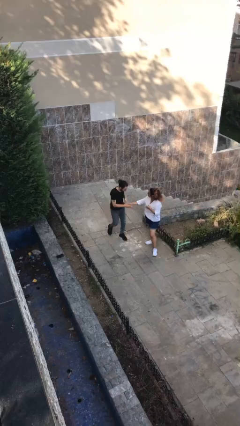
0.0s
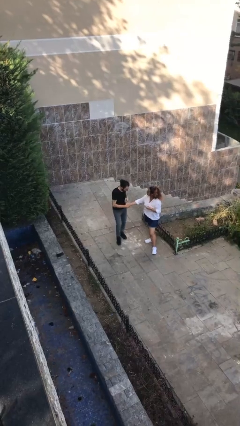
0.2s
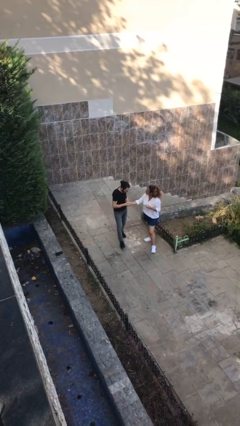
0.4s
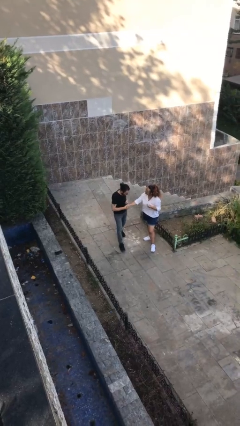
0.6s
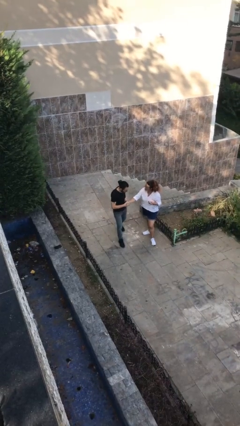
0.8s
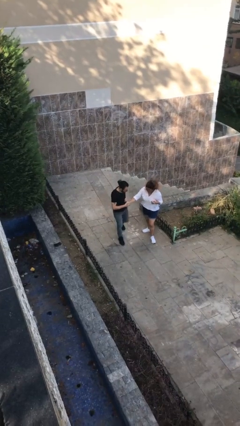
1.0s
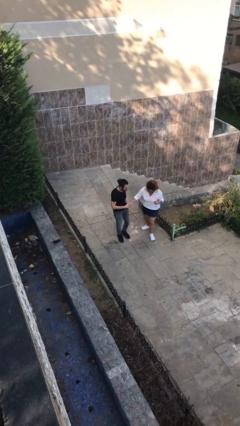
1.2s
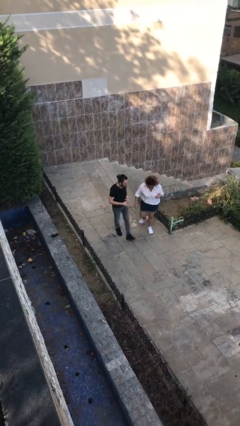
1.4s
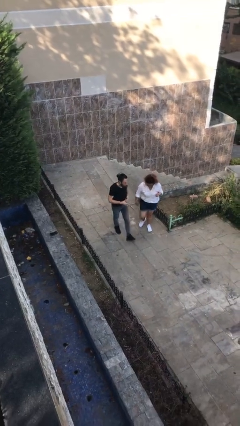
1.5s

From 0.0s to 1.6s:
person shakes hand

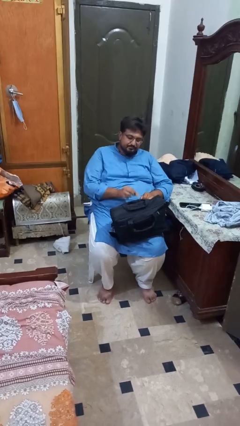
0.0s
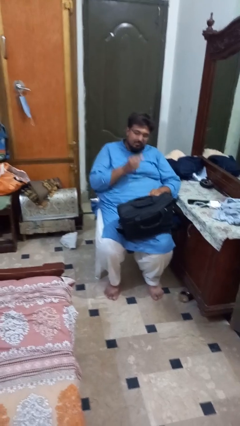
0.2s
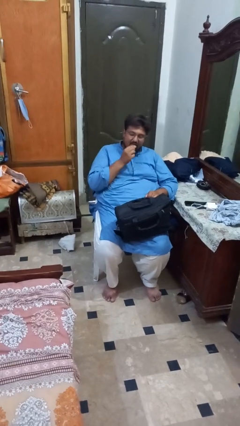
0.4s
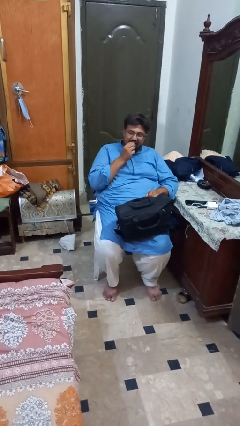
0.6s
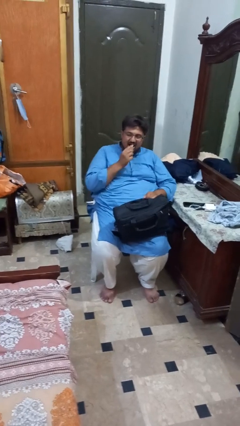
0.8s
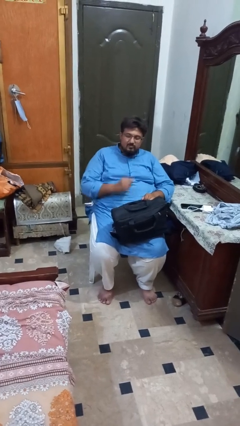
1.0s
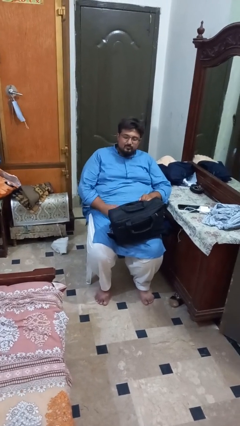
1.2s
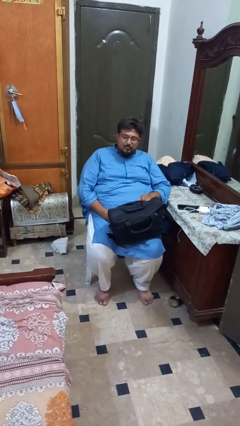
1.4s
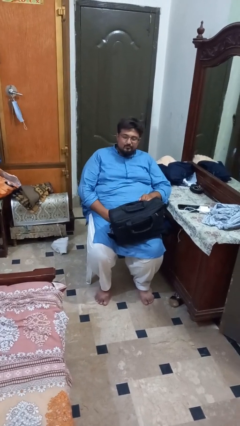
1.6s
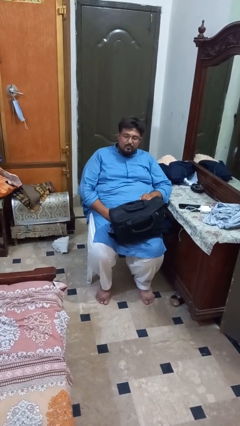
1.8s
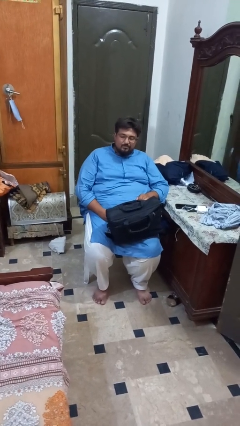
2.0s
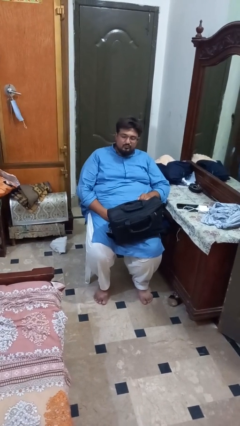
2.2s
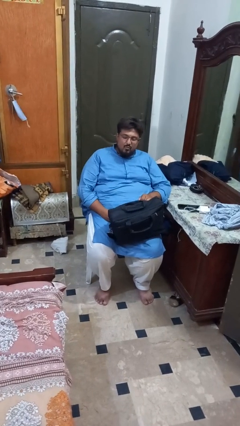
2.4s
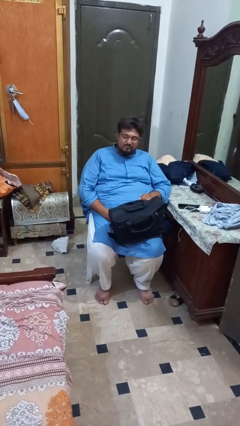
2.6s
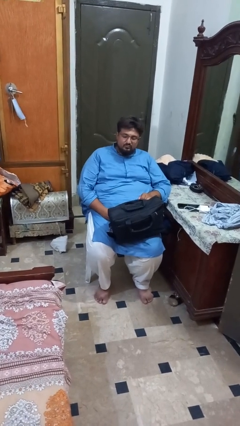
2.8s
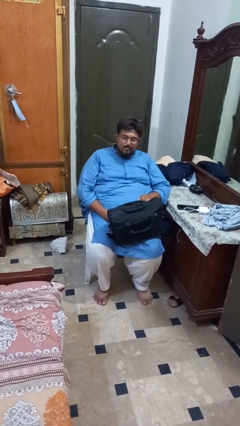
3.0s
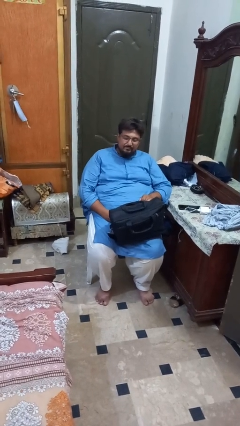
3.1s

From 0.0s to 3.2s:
person eats snack from bag

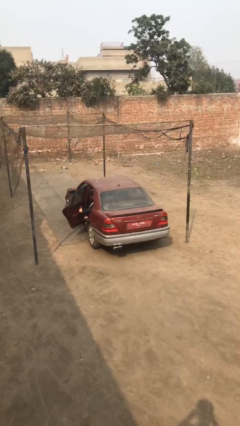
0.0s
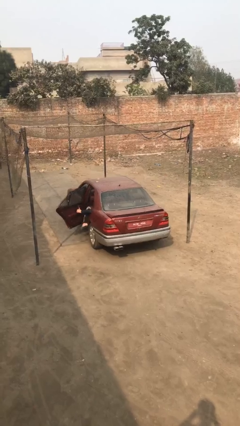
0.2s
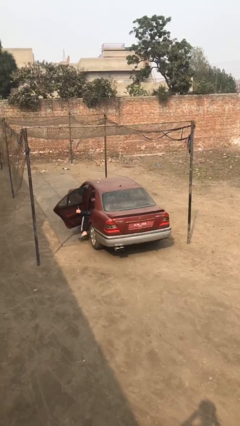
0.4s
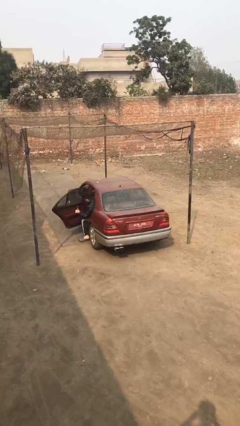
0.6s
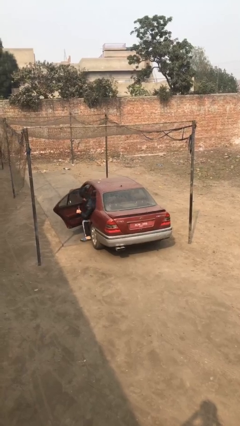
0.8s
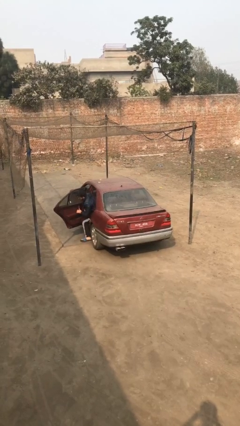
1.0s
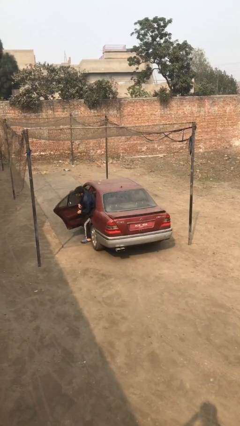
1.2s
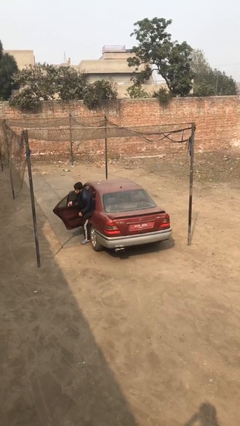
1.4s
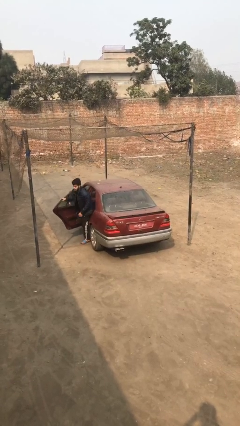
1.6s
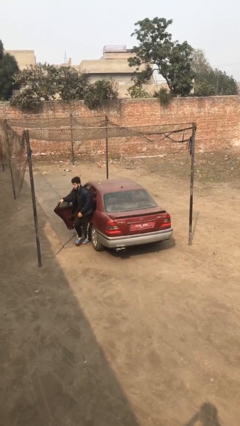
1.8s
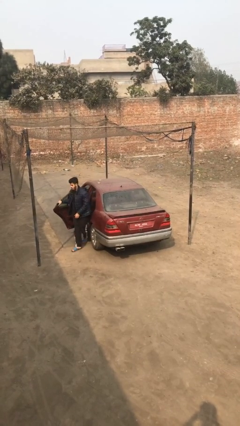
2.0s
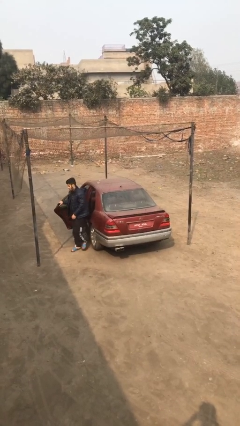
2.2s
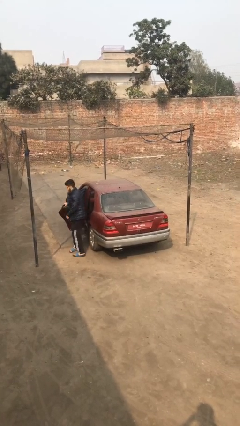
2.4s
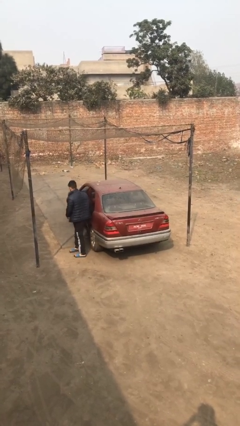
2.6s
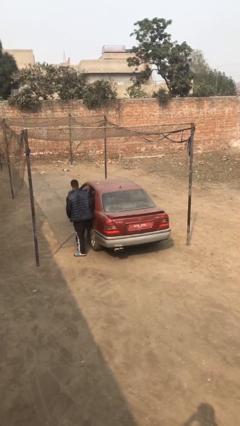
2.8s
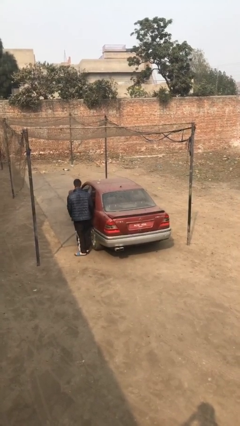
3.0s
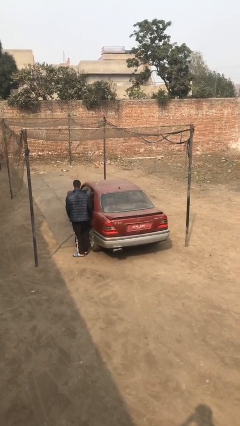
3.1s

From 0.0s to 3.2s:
car drops off person

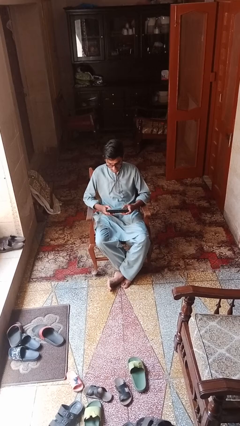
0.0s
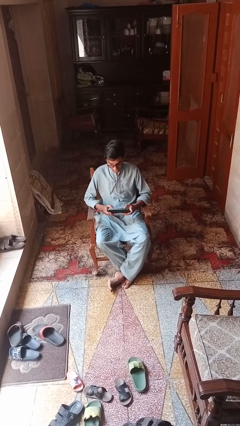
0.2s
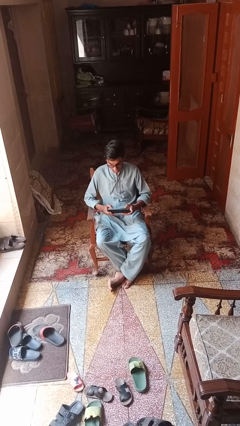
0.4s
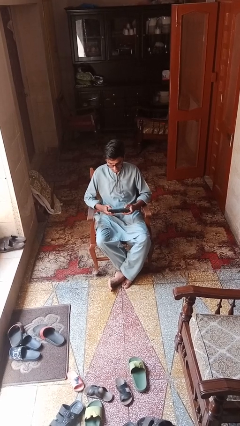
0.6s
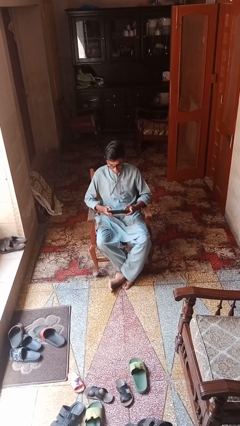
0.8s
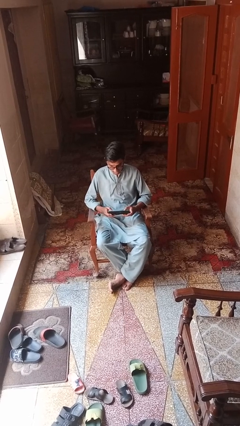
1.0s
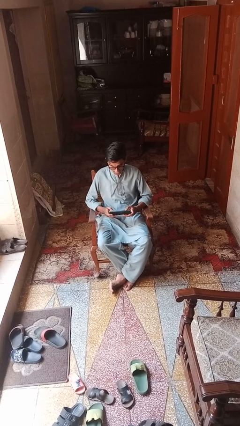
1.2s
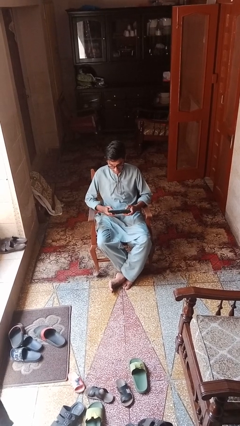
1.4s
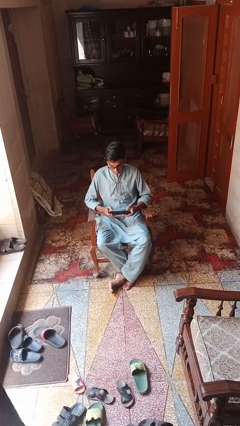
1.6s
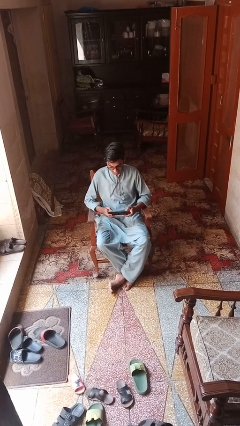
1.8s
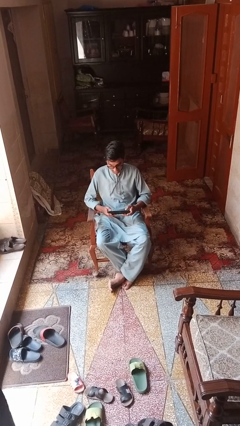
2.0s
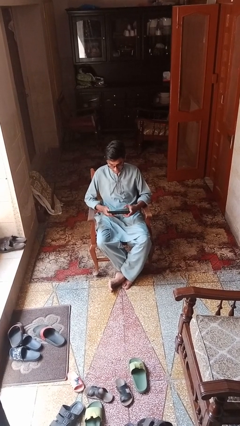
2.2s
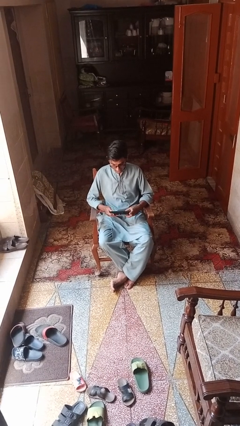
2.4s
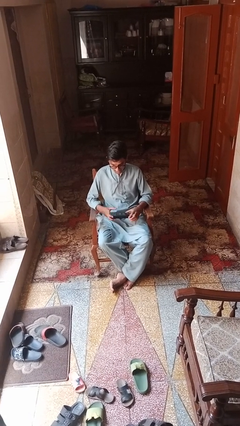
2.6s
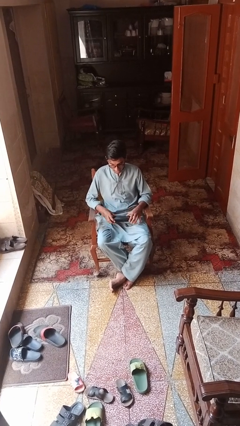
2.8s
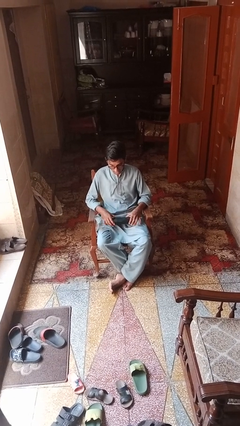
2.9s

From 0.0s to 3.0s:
person interacts with tablet

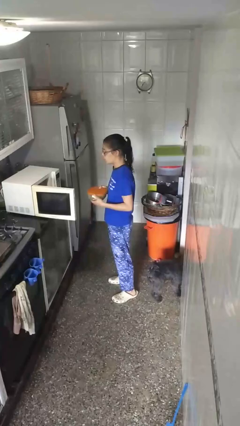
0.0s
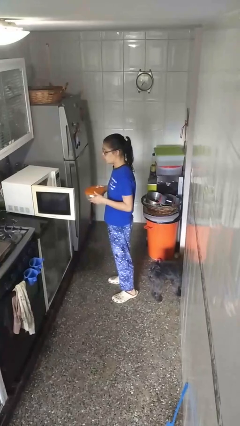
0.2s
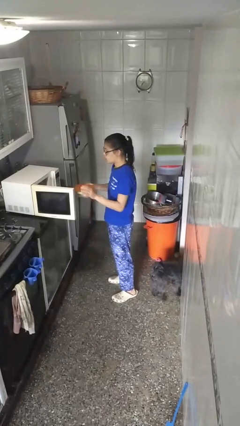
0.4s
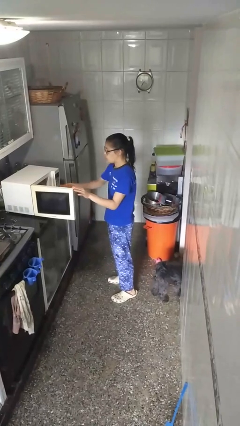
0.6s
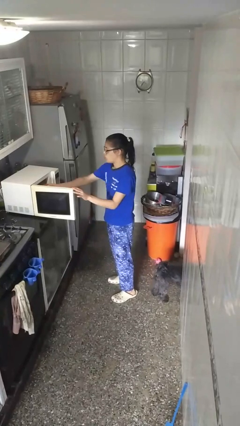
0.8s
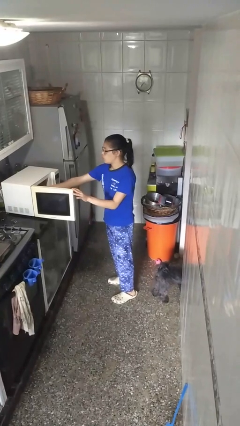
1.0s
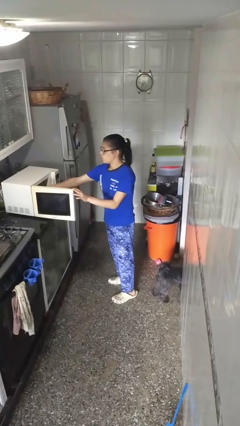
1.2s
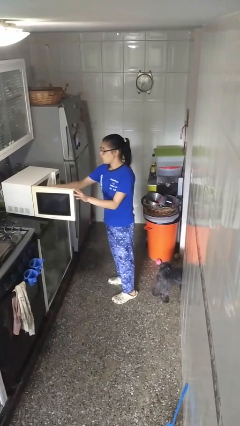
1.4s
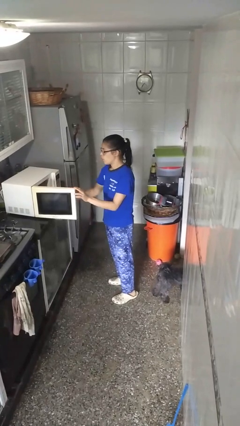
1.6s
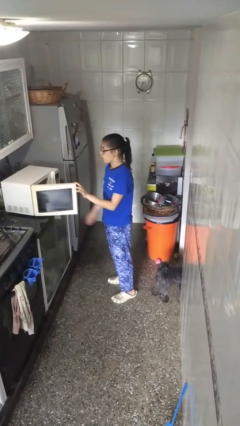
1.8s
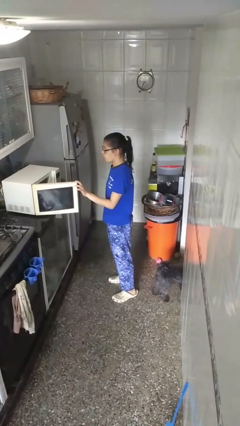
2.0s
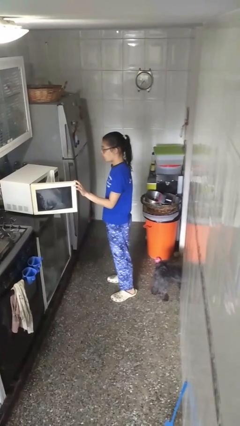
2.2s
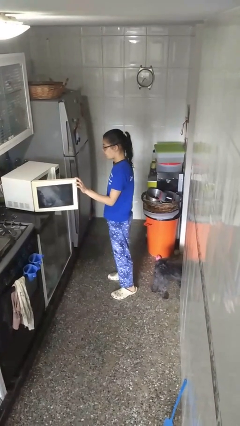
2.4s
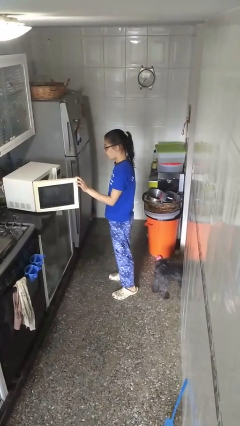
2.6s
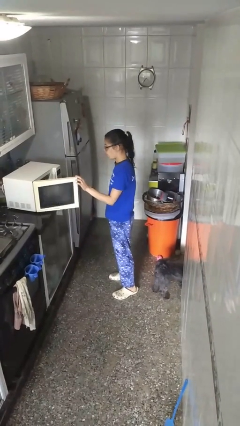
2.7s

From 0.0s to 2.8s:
person puts object into microwave

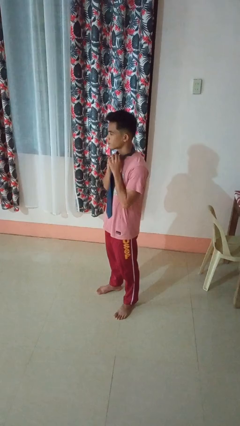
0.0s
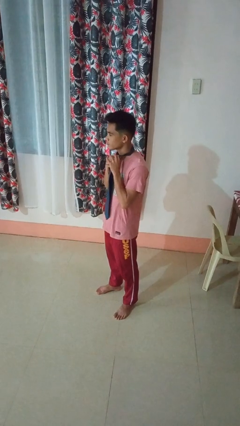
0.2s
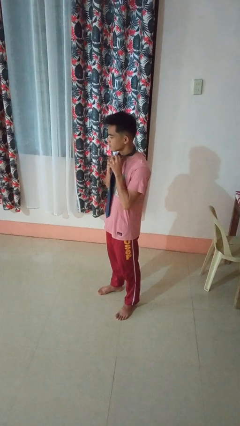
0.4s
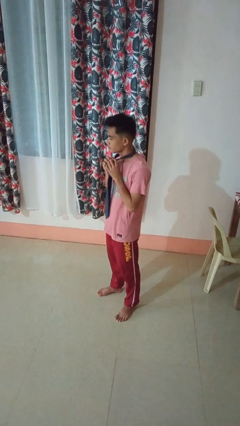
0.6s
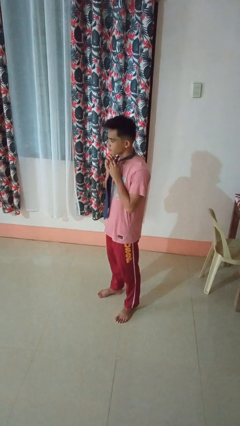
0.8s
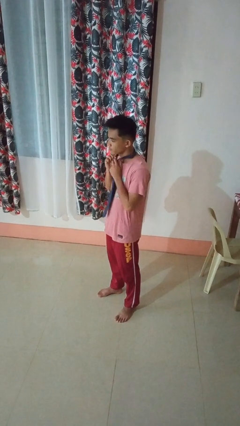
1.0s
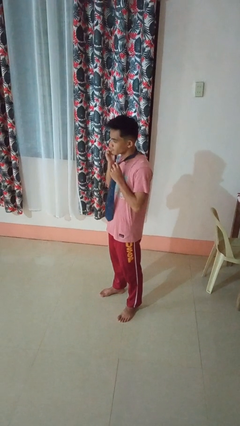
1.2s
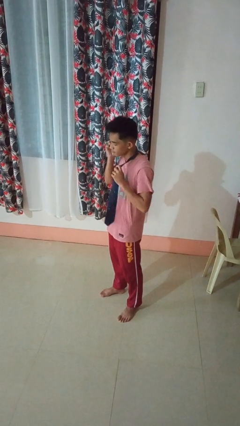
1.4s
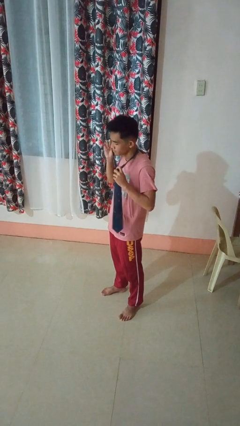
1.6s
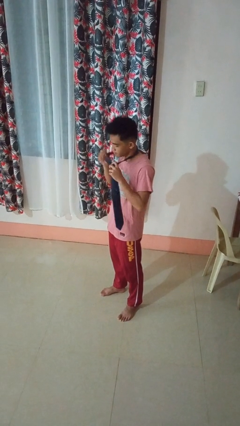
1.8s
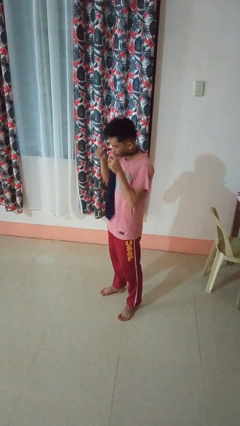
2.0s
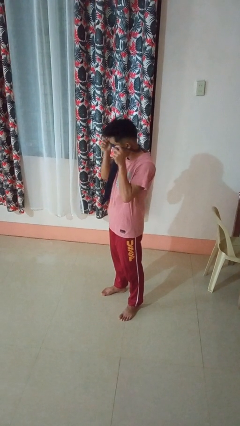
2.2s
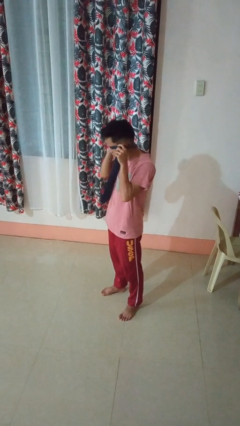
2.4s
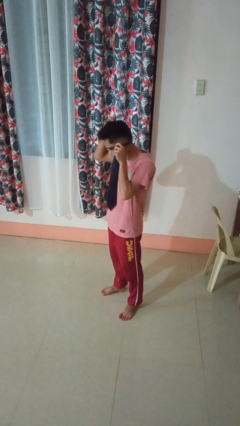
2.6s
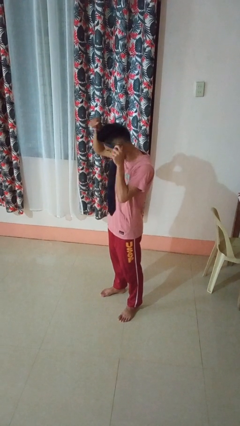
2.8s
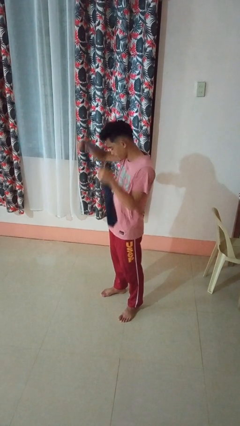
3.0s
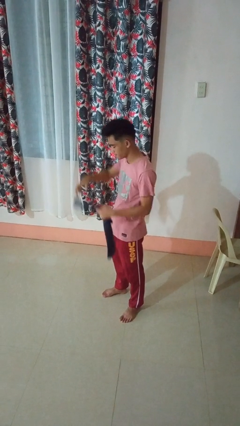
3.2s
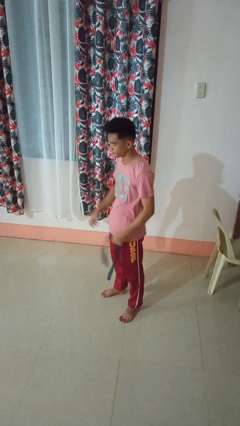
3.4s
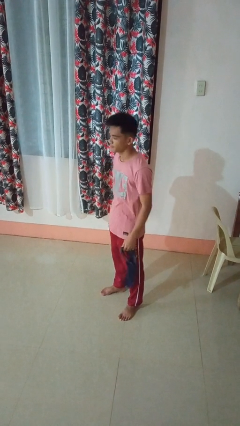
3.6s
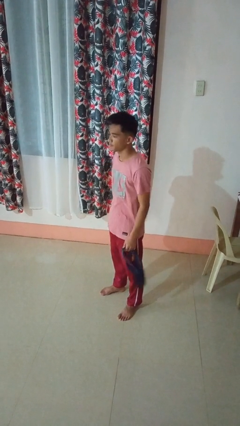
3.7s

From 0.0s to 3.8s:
person takes off necktie

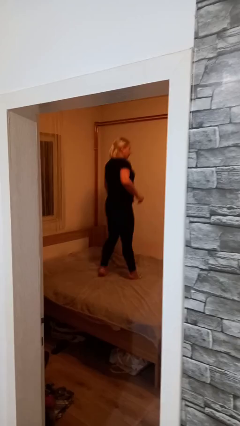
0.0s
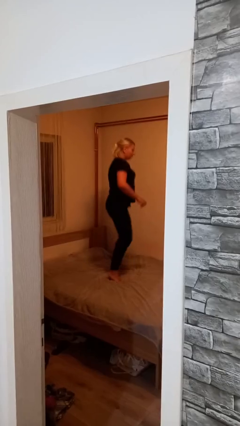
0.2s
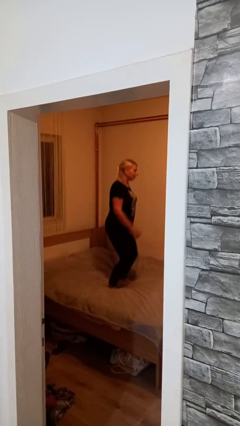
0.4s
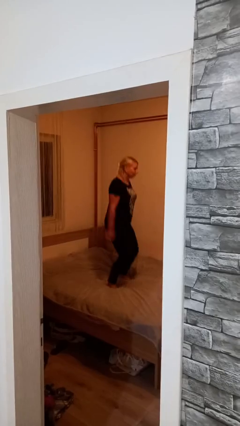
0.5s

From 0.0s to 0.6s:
person jumps on bed
